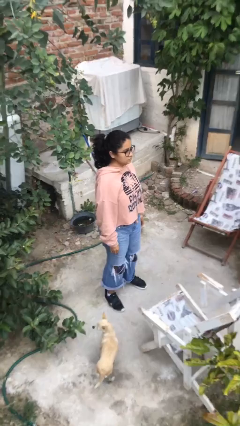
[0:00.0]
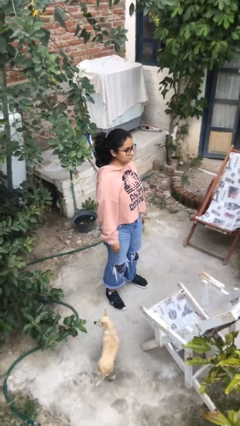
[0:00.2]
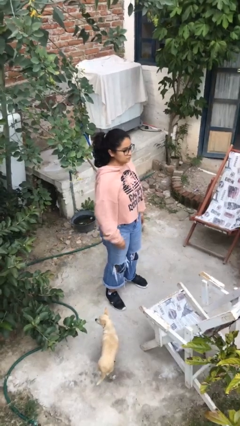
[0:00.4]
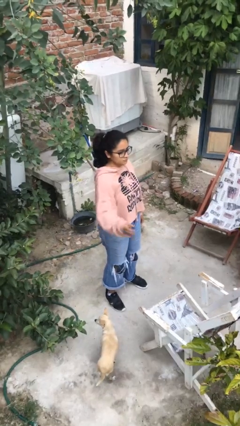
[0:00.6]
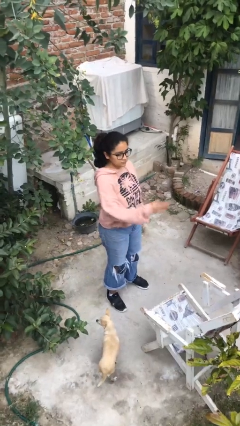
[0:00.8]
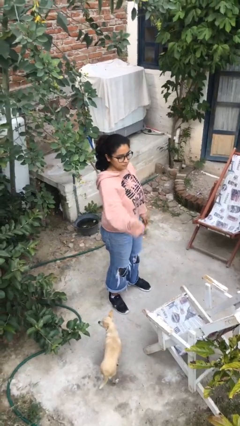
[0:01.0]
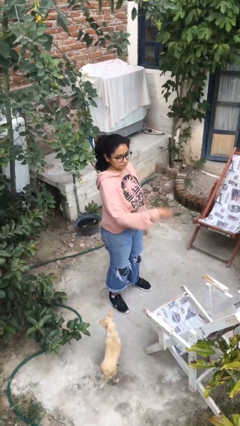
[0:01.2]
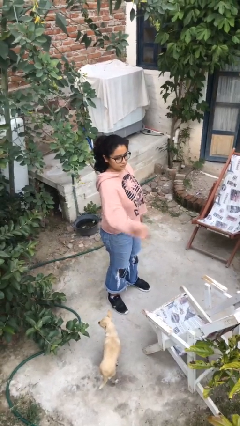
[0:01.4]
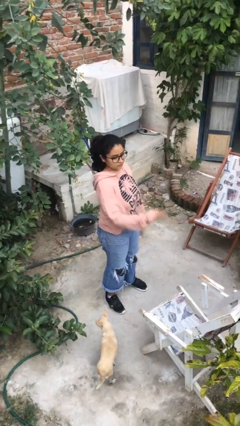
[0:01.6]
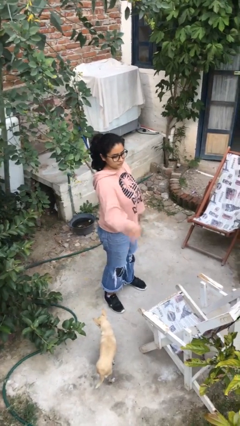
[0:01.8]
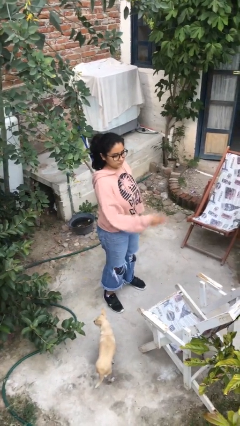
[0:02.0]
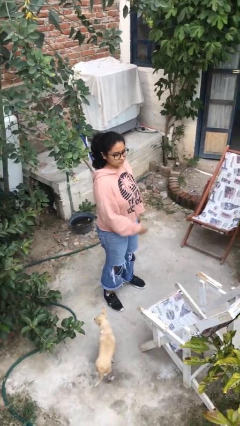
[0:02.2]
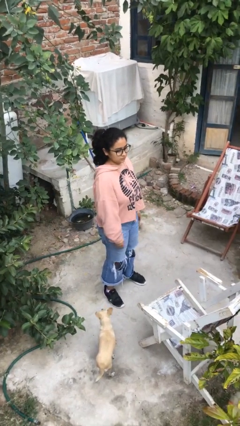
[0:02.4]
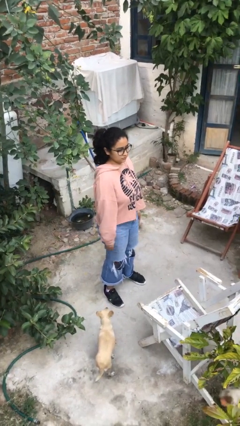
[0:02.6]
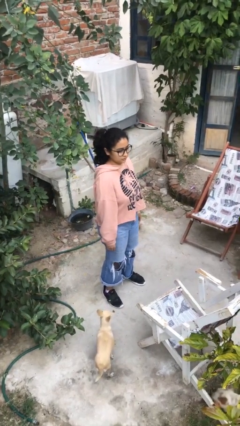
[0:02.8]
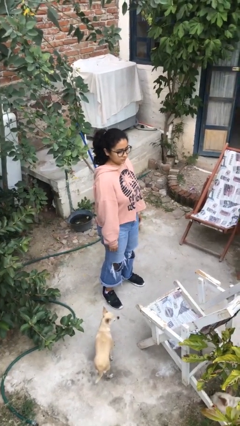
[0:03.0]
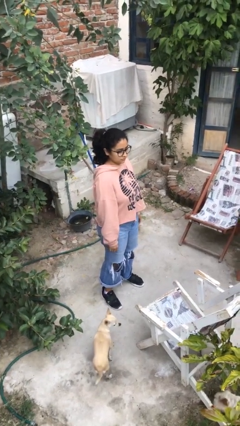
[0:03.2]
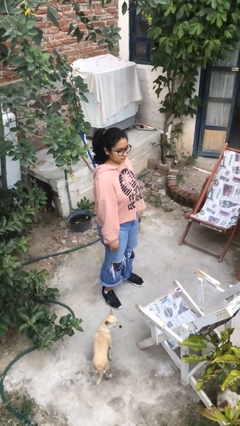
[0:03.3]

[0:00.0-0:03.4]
person punches

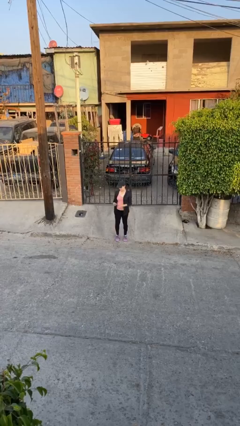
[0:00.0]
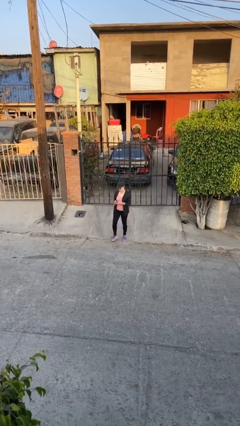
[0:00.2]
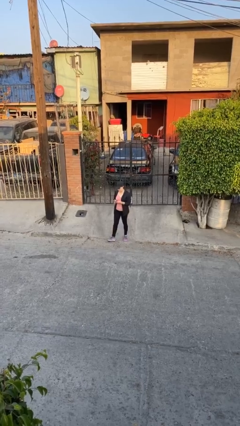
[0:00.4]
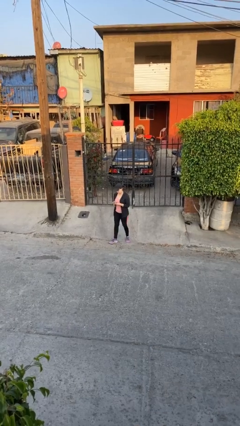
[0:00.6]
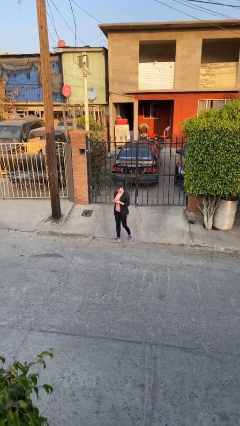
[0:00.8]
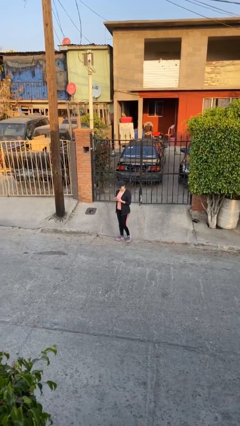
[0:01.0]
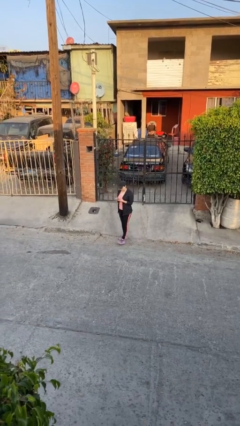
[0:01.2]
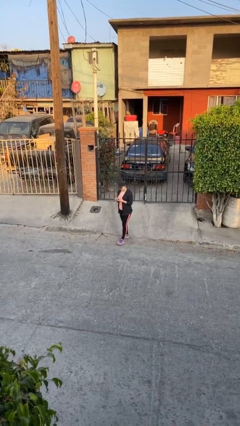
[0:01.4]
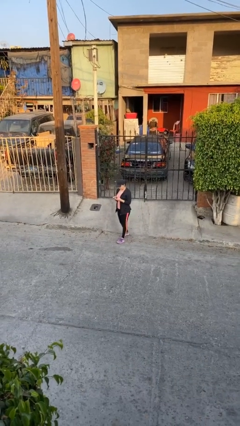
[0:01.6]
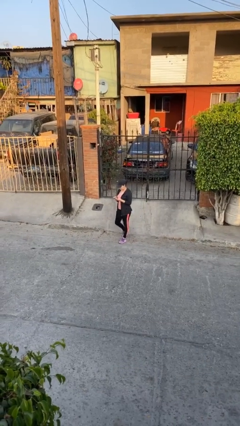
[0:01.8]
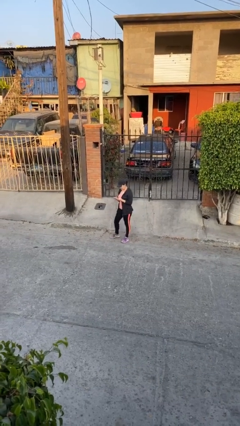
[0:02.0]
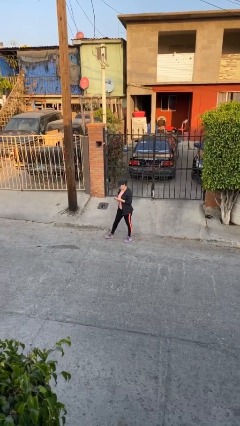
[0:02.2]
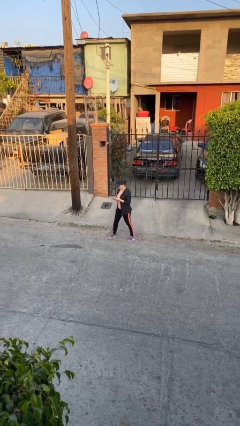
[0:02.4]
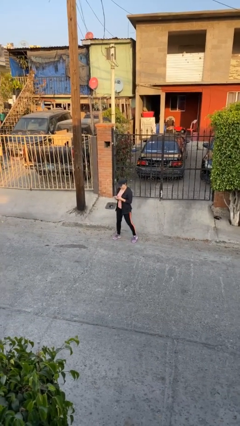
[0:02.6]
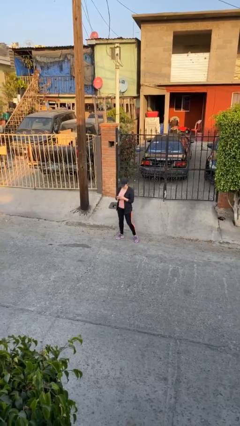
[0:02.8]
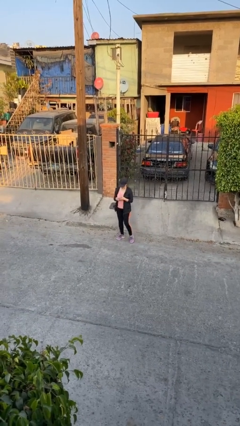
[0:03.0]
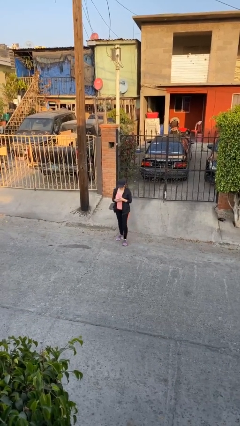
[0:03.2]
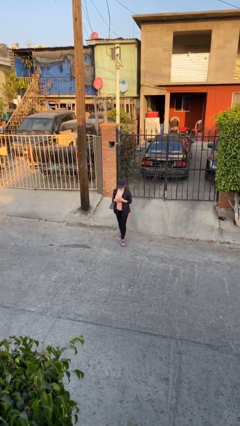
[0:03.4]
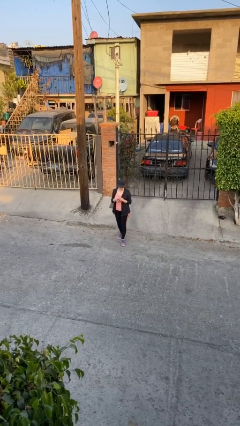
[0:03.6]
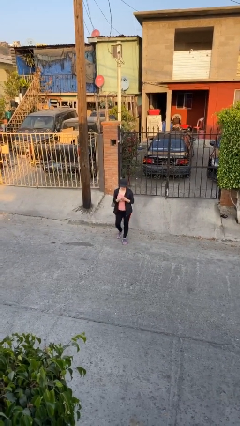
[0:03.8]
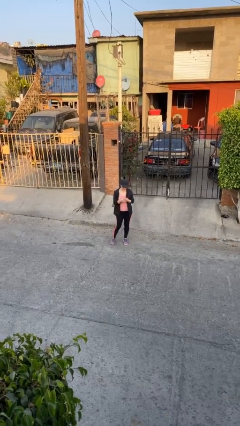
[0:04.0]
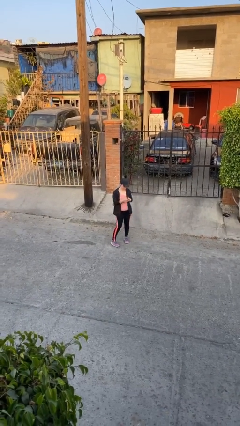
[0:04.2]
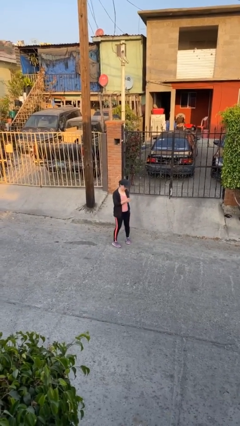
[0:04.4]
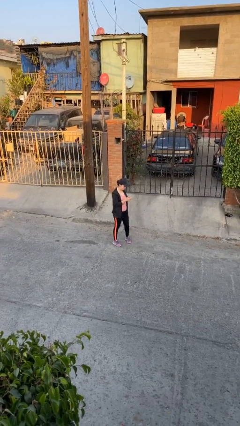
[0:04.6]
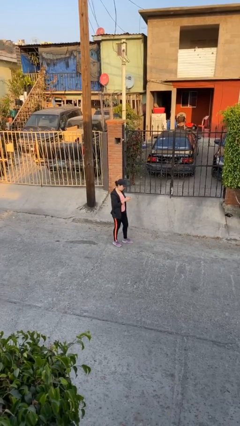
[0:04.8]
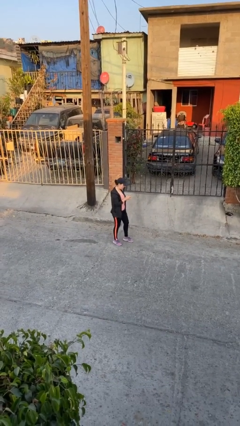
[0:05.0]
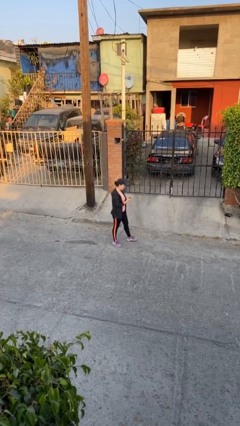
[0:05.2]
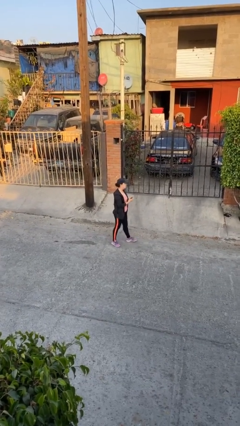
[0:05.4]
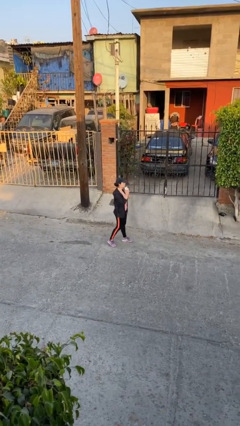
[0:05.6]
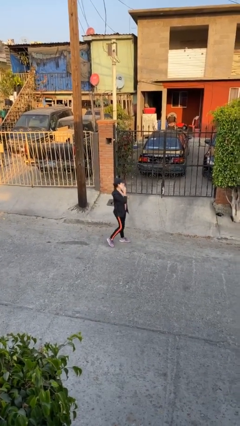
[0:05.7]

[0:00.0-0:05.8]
person texts on phone

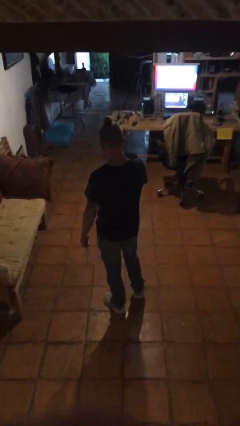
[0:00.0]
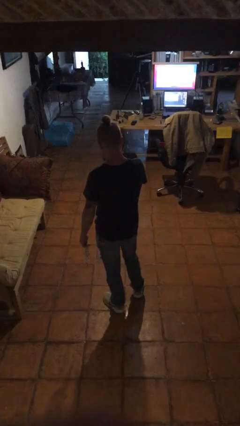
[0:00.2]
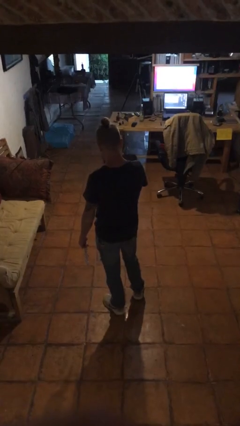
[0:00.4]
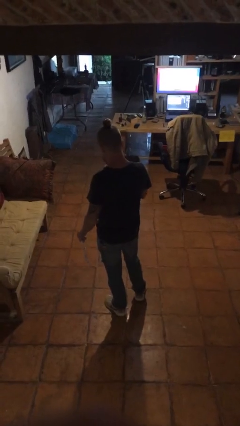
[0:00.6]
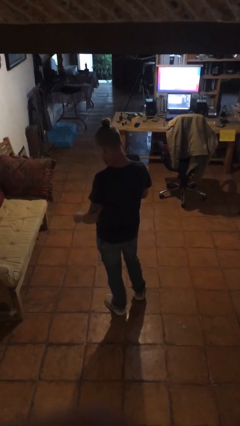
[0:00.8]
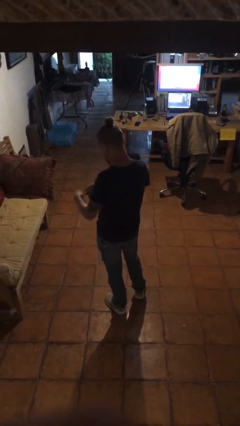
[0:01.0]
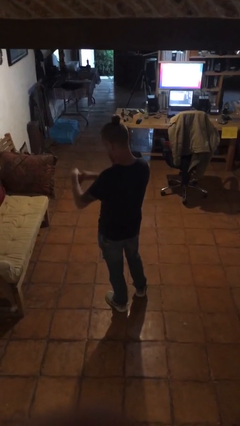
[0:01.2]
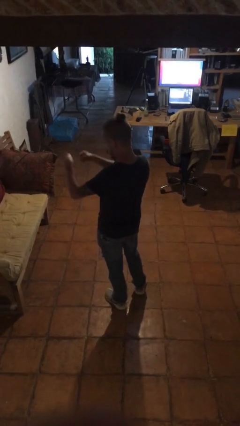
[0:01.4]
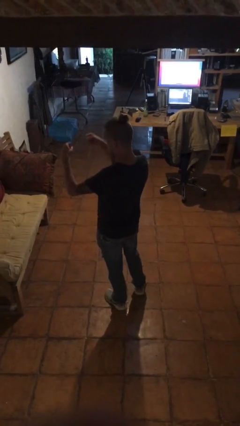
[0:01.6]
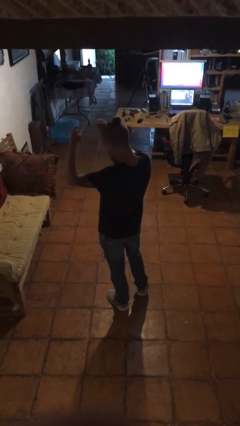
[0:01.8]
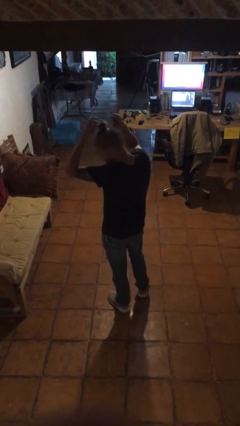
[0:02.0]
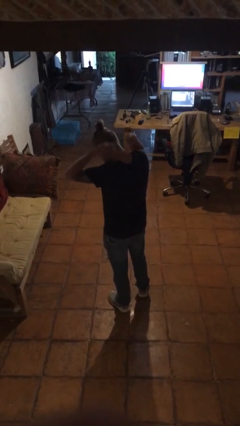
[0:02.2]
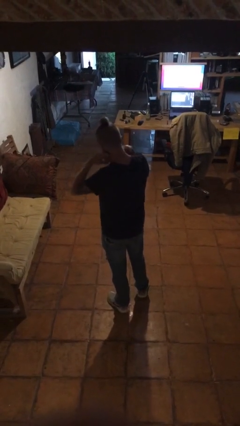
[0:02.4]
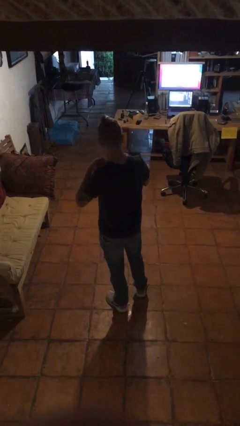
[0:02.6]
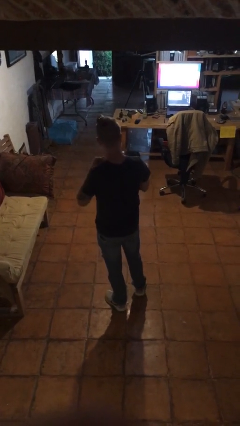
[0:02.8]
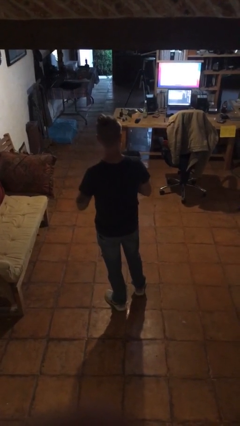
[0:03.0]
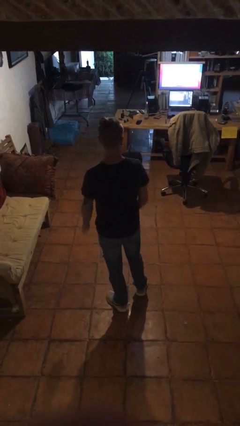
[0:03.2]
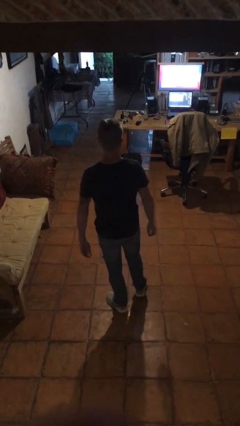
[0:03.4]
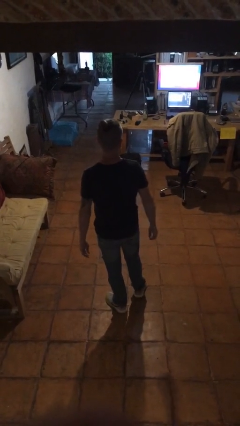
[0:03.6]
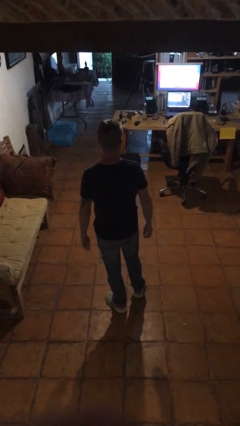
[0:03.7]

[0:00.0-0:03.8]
person puts on necklace

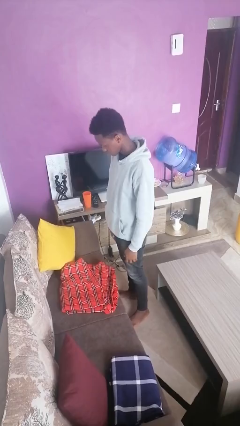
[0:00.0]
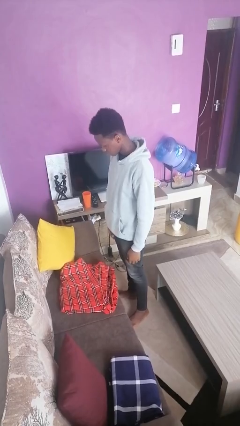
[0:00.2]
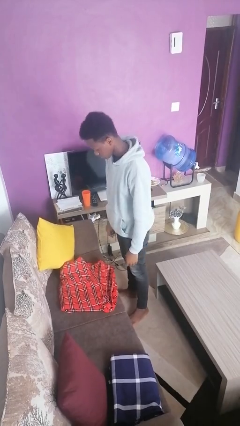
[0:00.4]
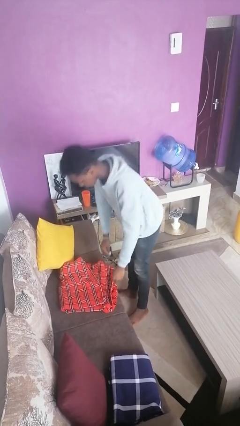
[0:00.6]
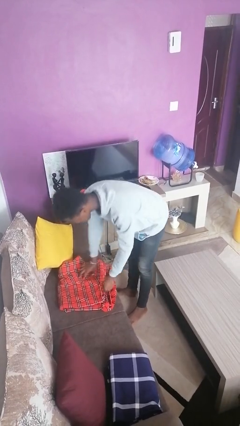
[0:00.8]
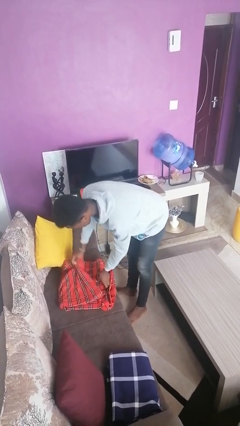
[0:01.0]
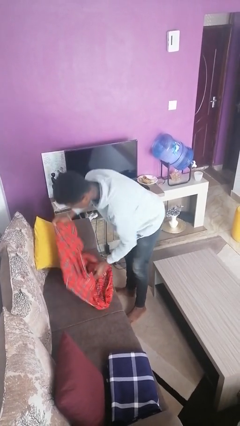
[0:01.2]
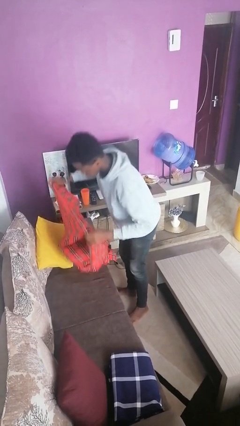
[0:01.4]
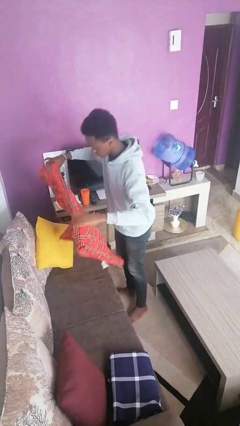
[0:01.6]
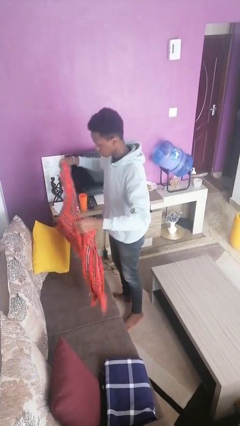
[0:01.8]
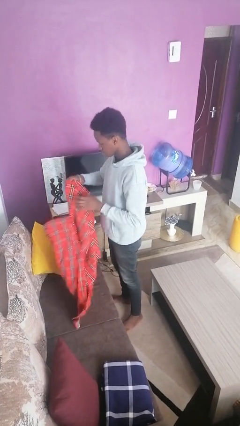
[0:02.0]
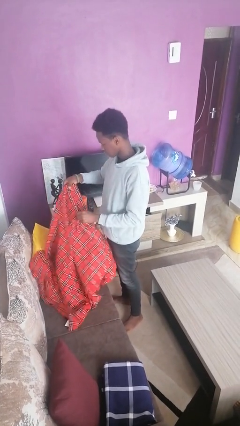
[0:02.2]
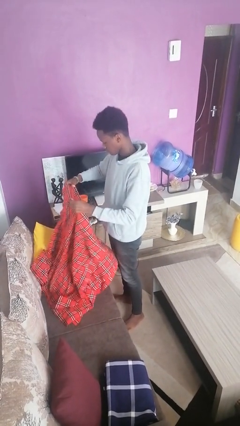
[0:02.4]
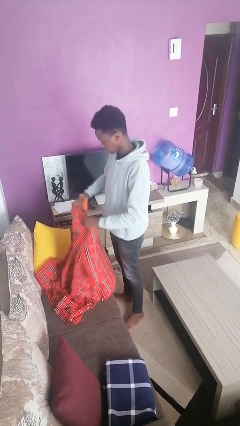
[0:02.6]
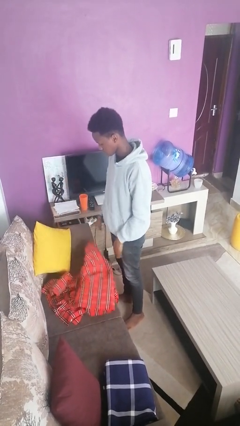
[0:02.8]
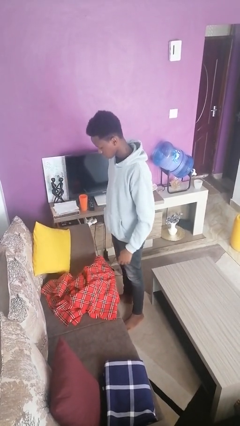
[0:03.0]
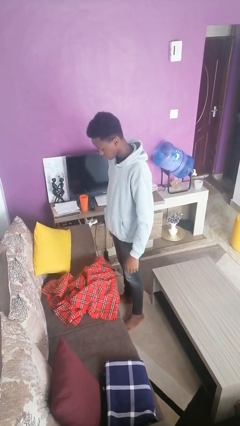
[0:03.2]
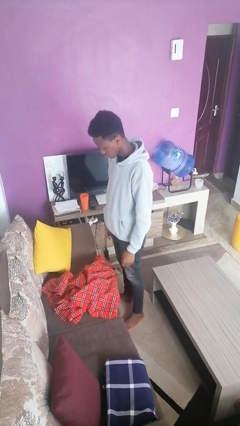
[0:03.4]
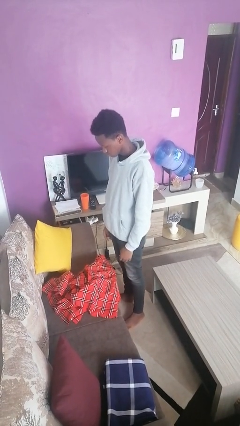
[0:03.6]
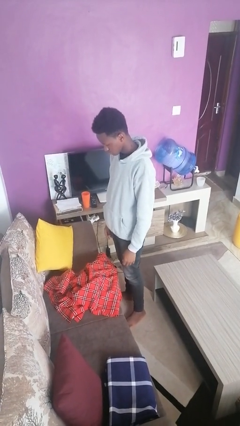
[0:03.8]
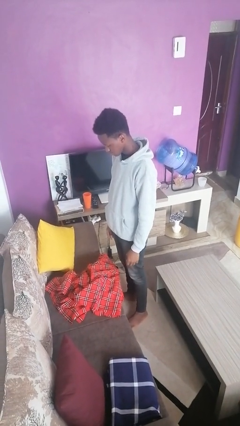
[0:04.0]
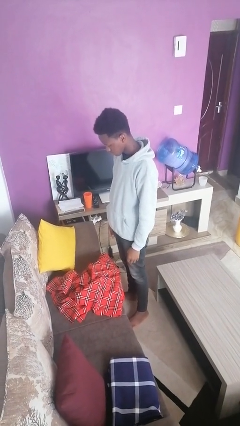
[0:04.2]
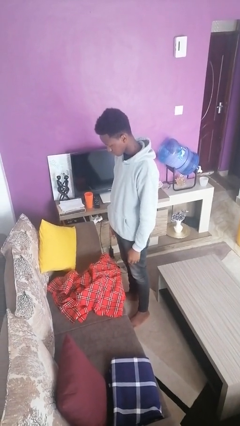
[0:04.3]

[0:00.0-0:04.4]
person unfolds blanket

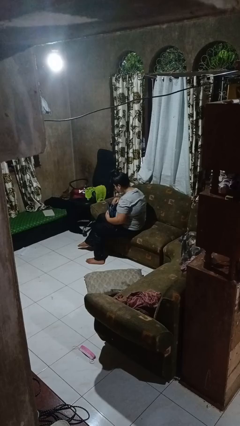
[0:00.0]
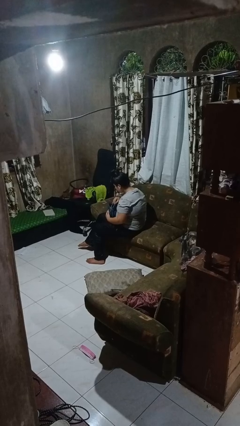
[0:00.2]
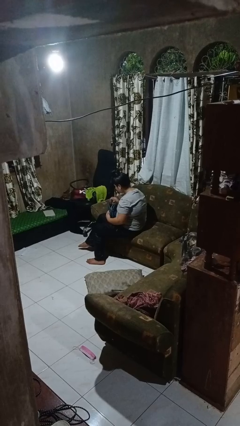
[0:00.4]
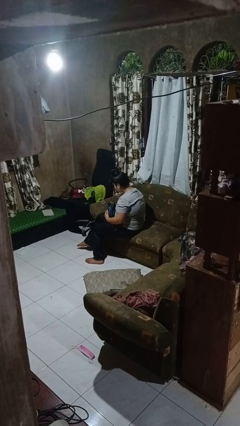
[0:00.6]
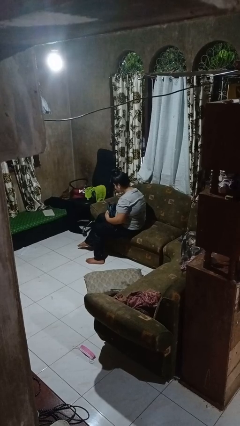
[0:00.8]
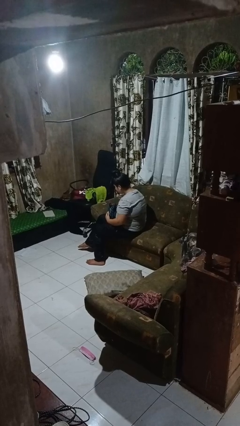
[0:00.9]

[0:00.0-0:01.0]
person puts object into purse
